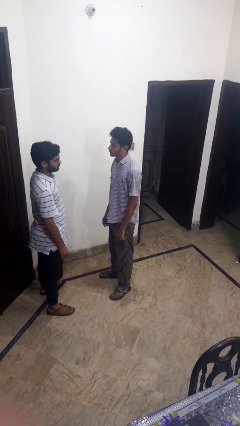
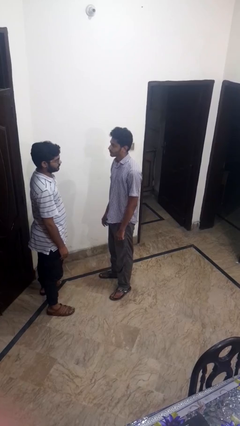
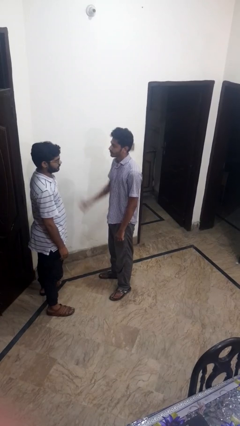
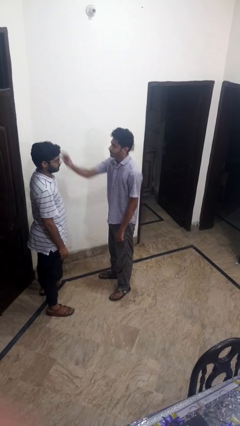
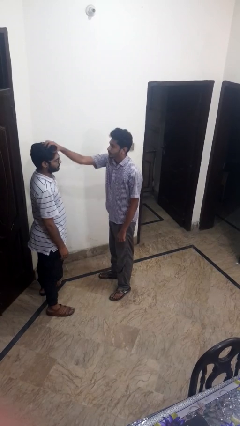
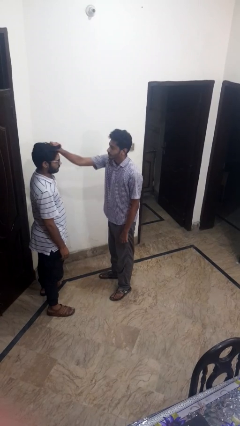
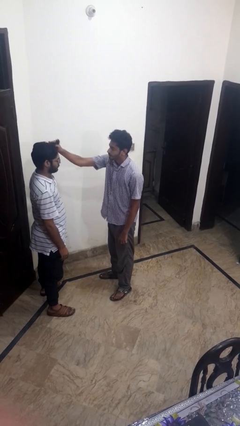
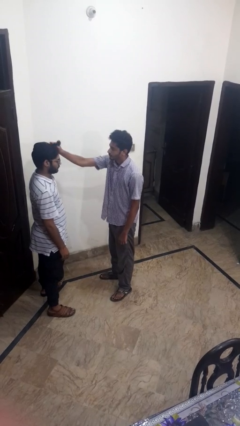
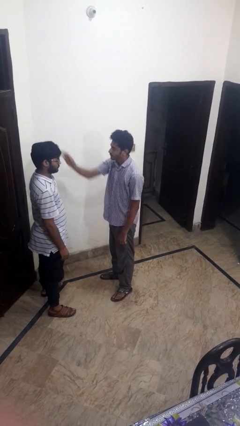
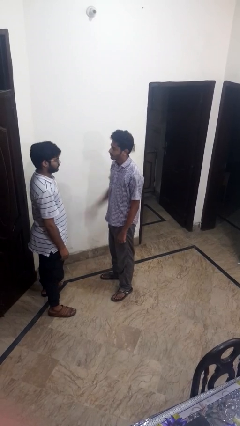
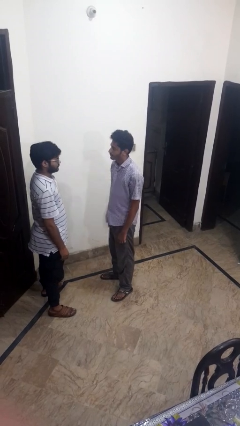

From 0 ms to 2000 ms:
person grabs person by hair

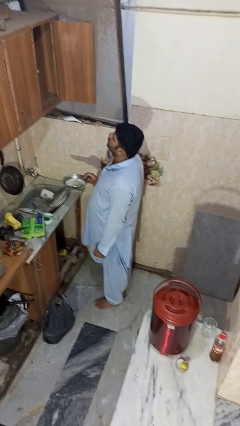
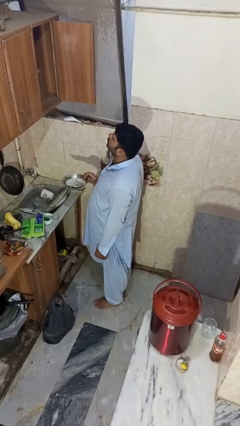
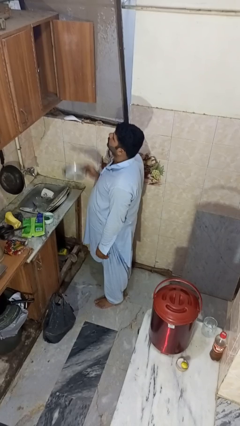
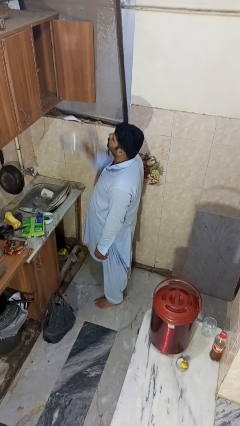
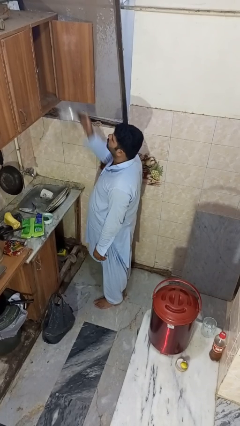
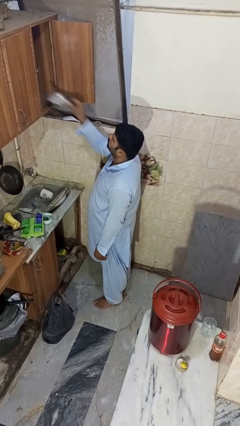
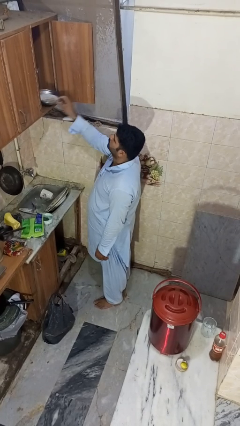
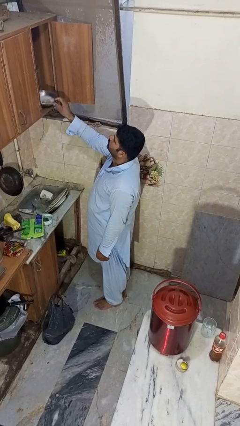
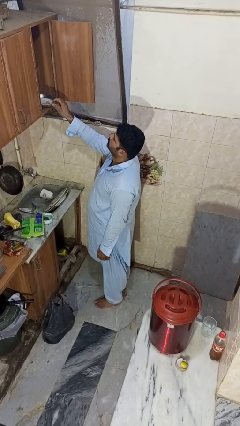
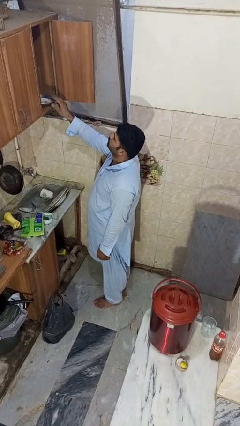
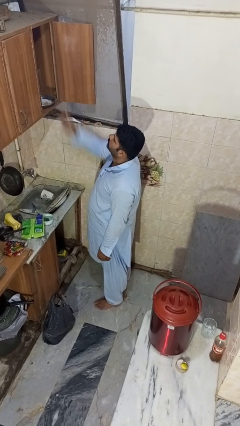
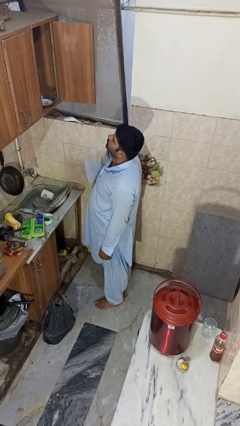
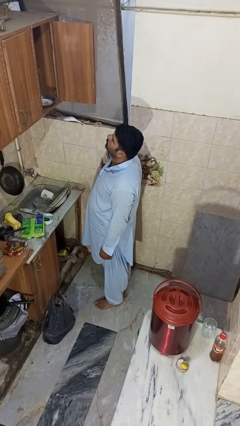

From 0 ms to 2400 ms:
person puts object in cabinet

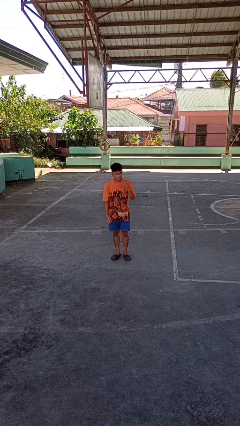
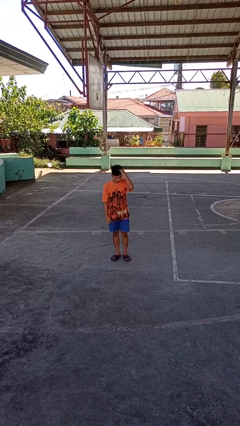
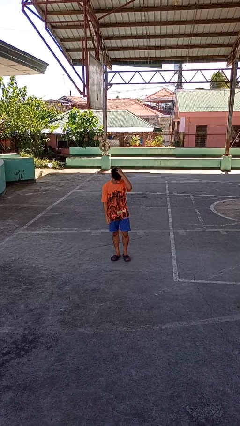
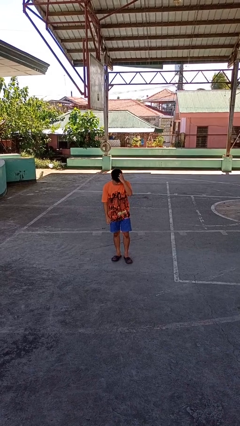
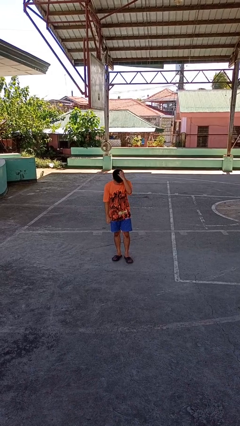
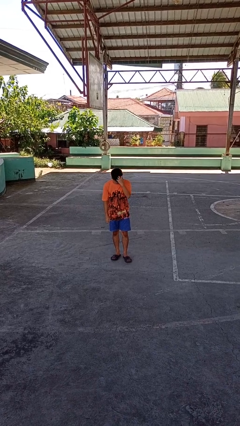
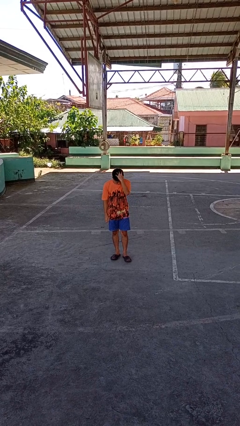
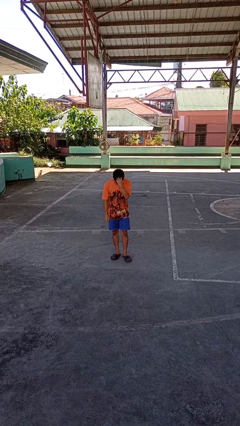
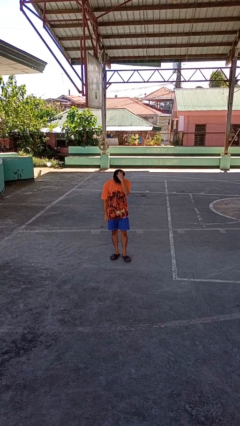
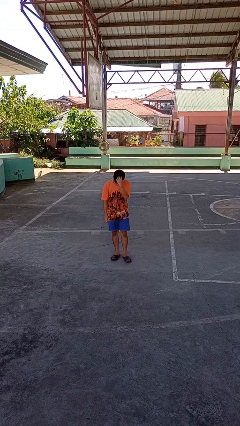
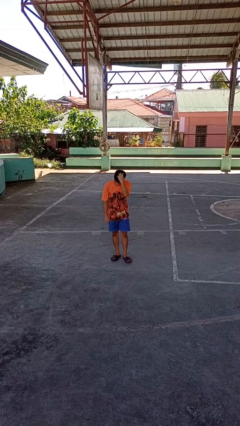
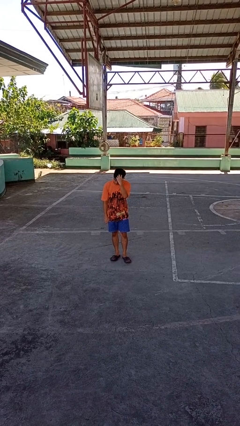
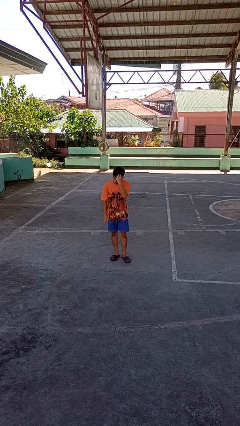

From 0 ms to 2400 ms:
person scratches face

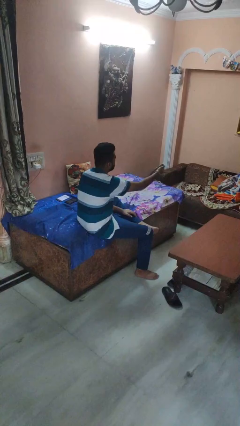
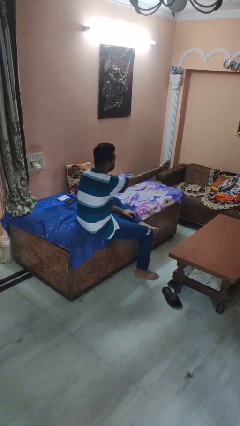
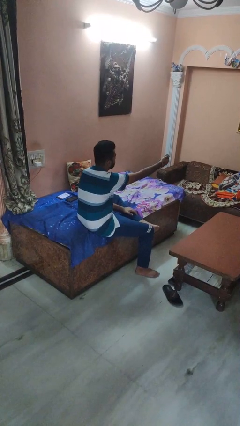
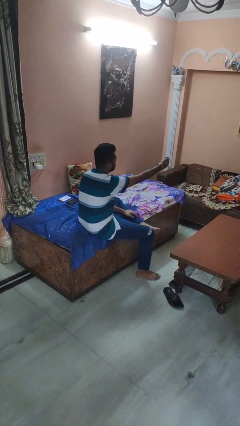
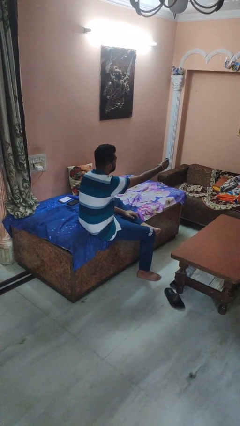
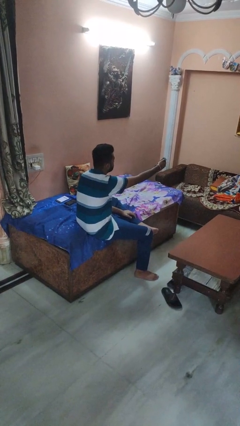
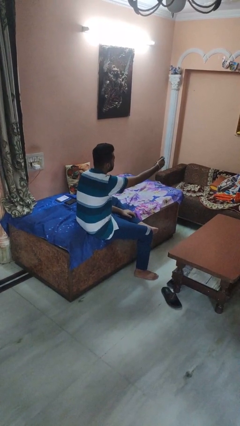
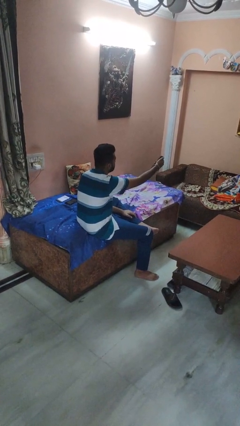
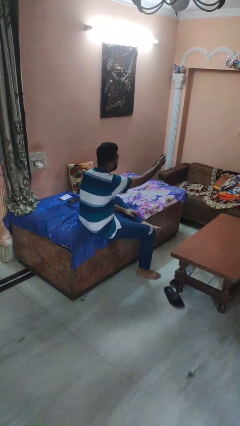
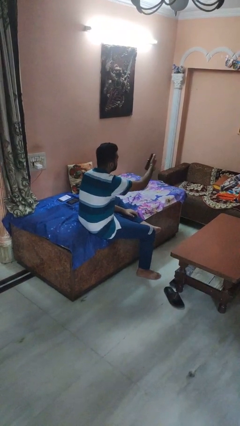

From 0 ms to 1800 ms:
person uses television remote

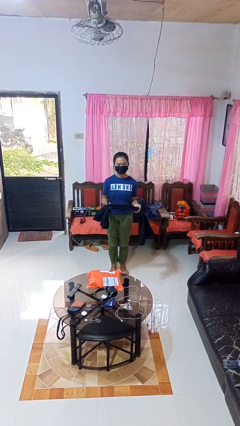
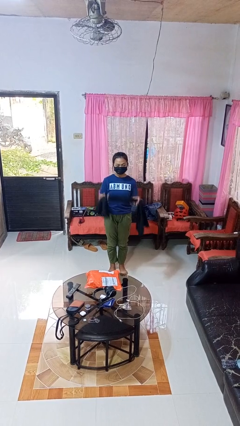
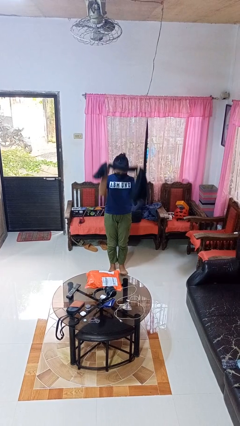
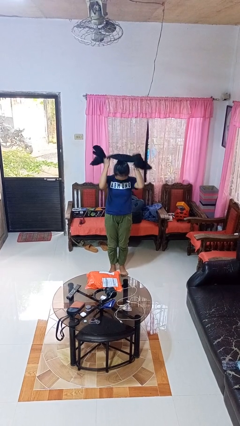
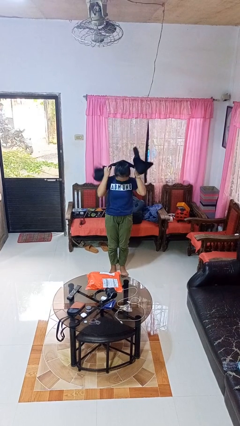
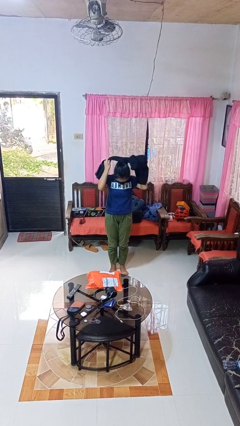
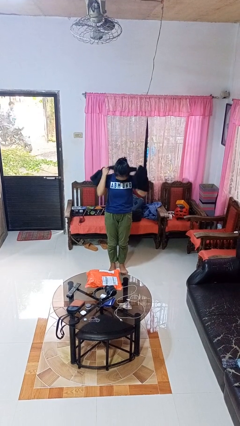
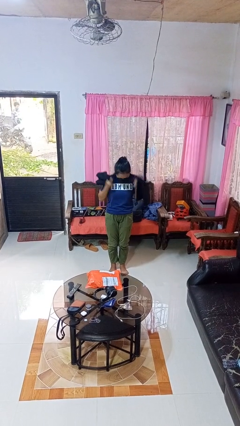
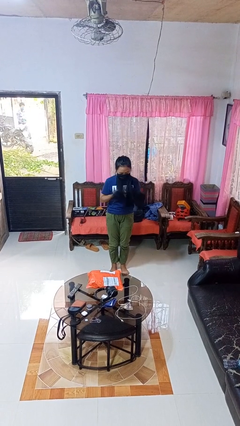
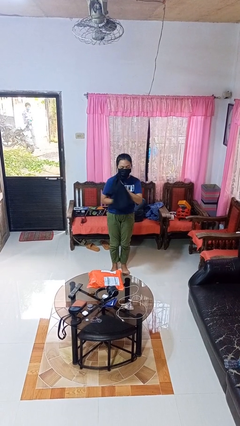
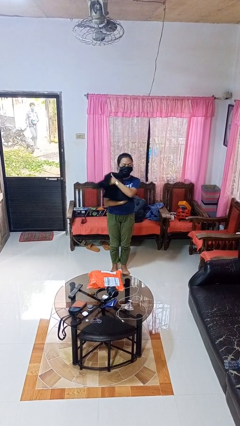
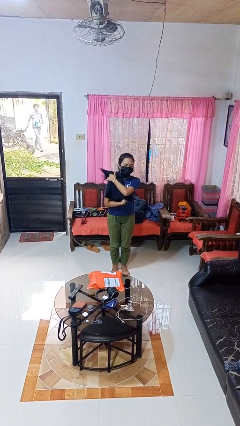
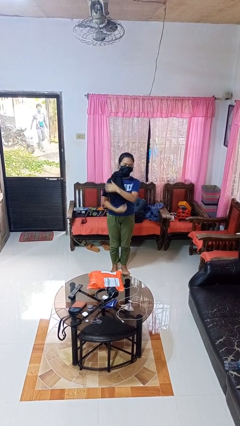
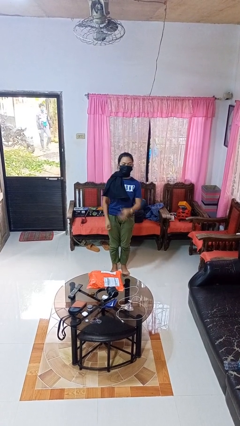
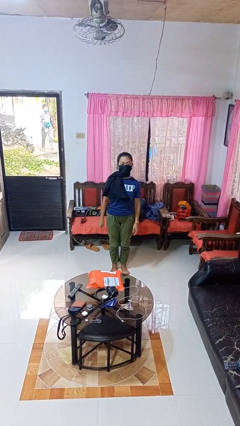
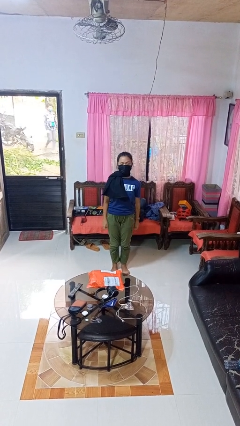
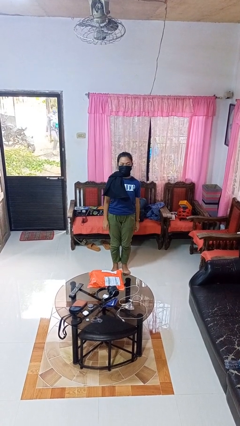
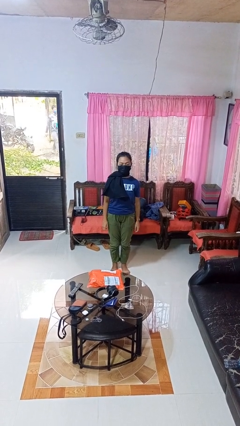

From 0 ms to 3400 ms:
person puts on scarf

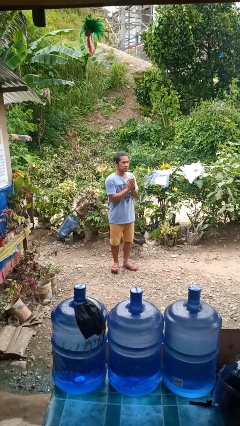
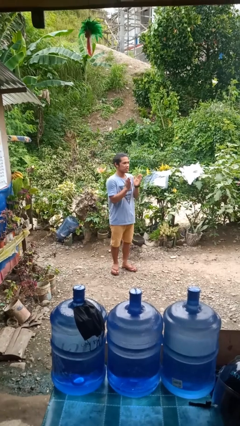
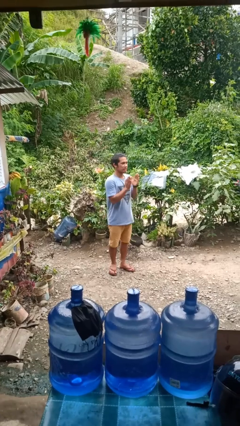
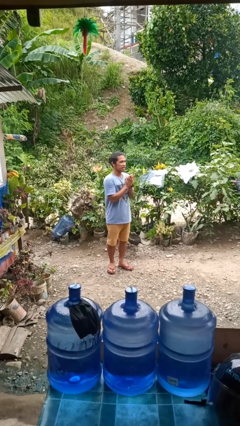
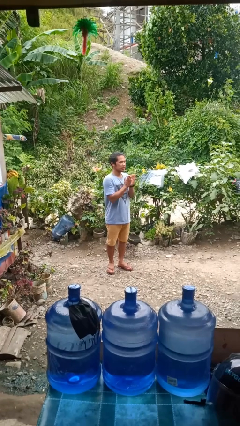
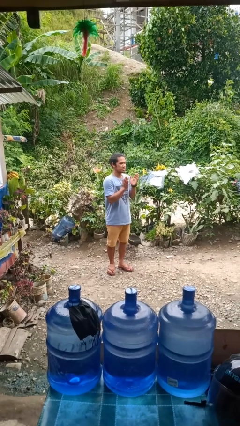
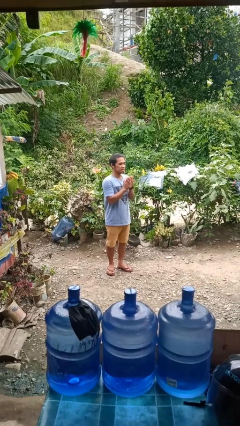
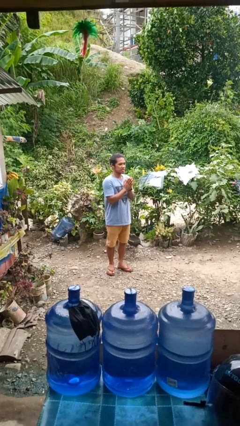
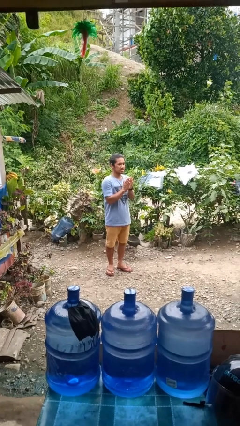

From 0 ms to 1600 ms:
person claps hands

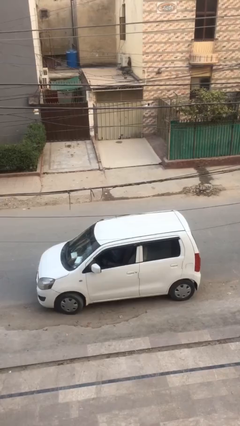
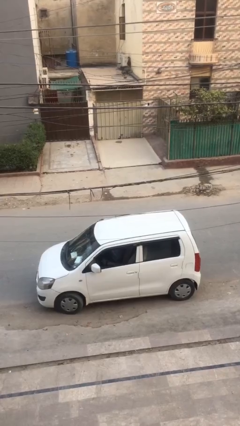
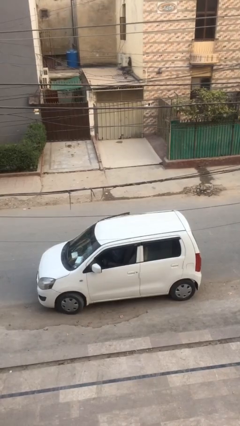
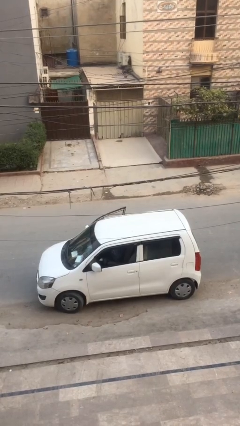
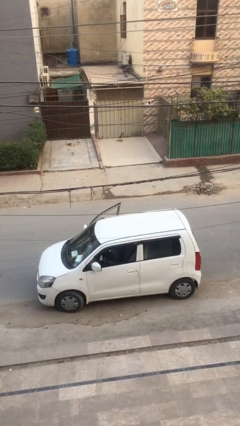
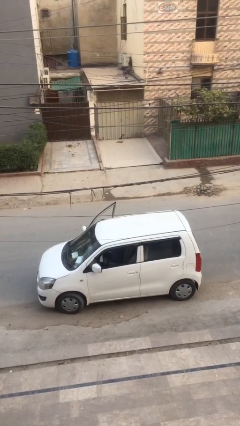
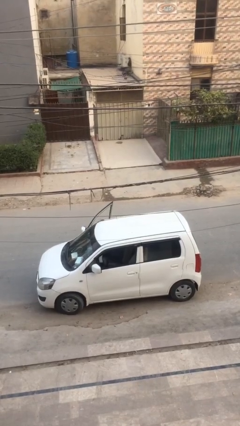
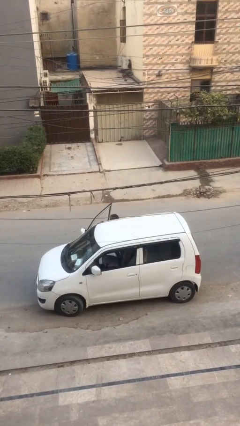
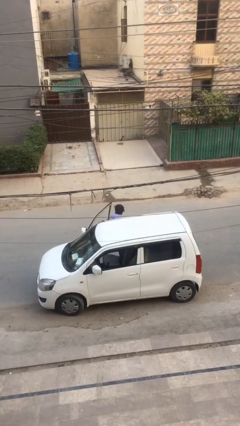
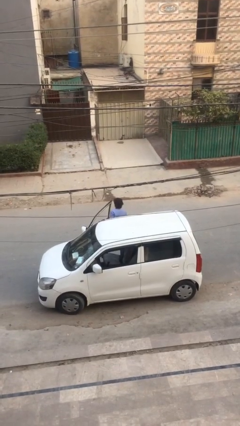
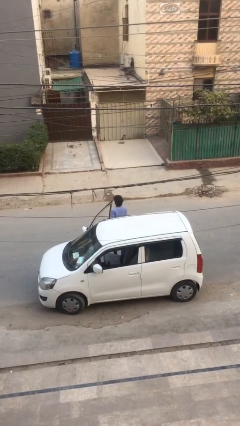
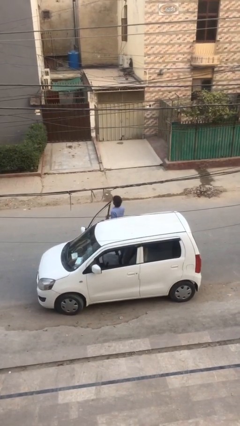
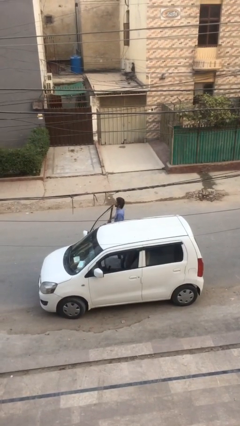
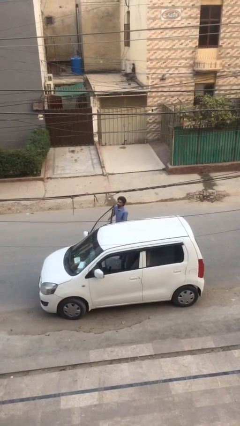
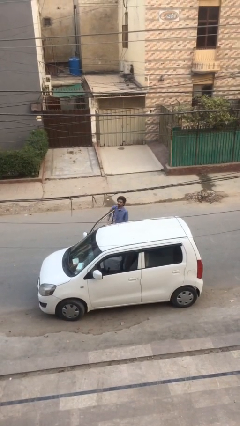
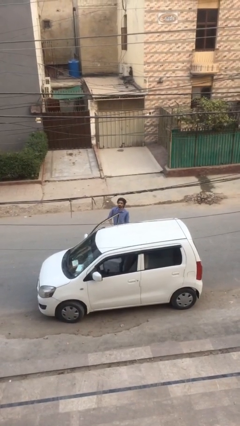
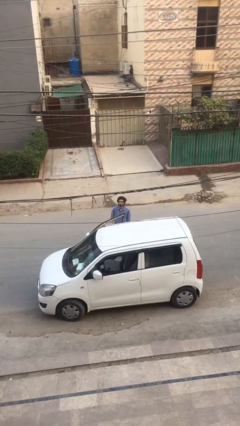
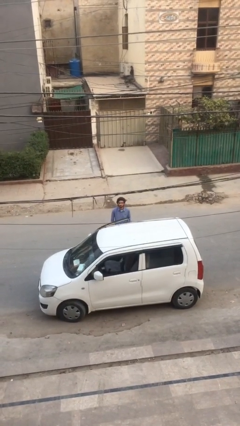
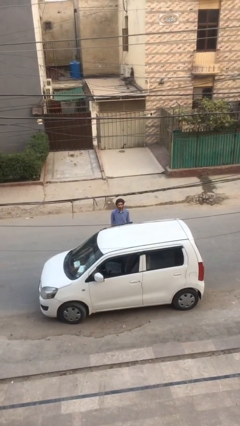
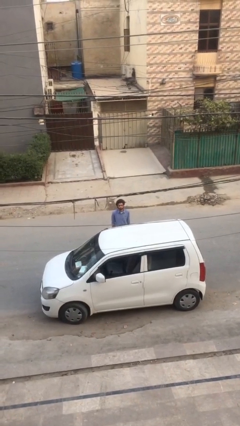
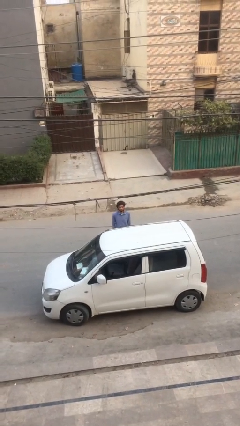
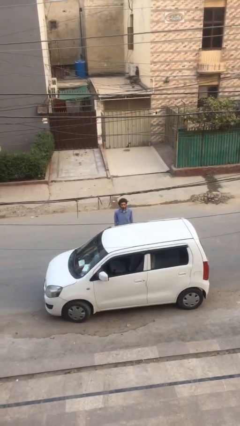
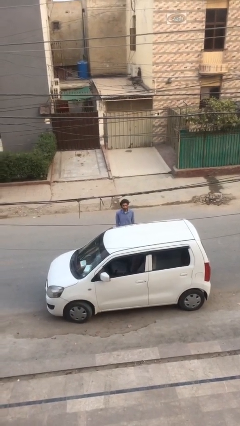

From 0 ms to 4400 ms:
person exits car
